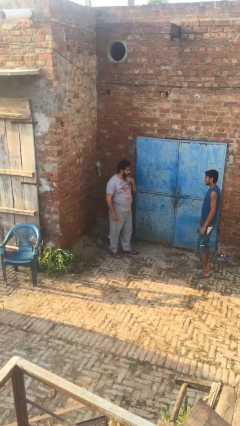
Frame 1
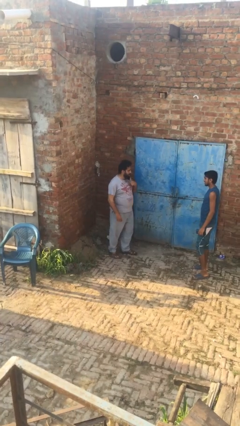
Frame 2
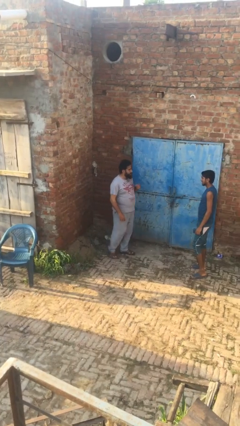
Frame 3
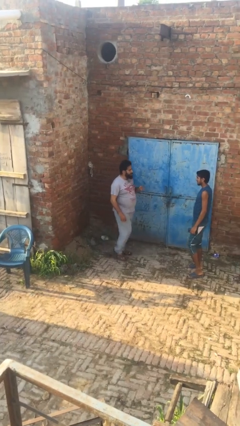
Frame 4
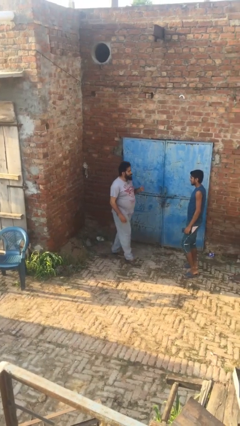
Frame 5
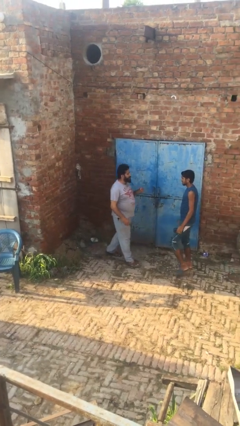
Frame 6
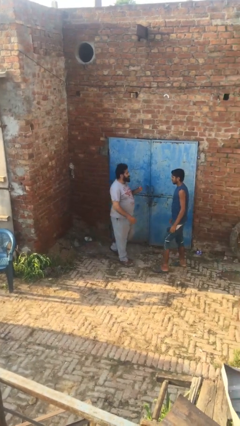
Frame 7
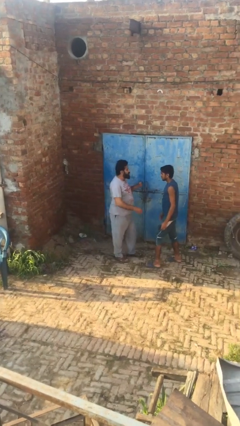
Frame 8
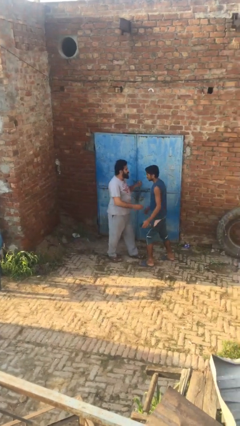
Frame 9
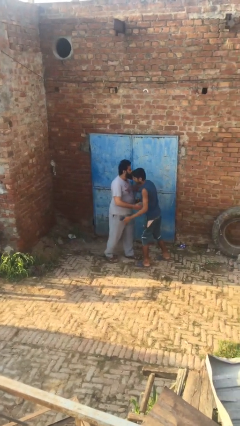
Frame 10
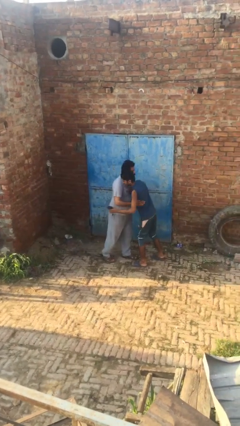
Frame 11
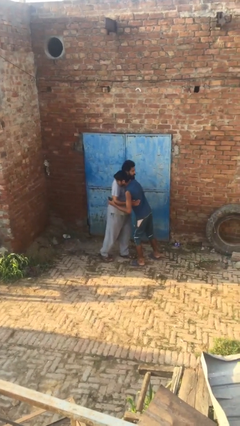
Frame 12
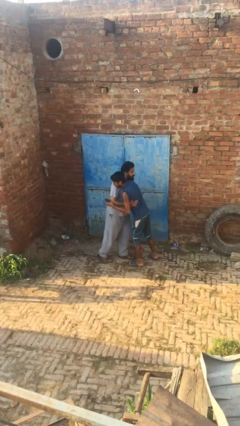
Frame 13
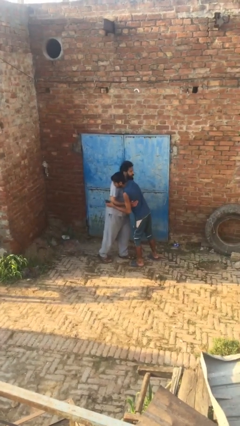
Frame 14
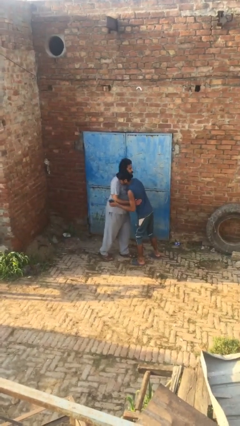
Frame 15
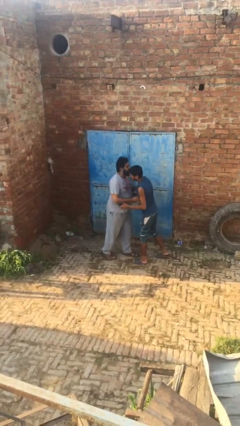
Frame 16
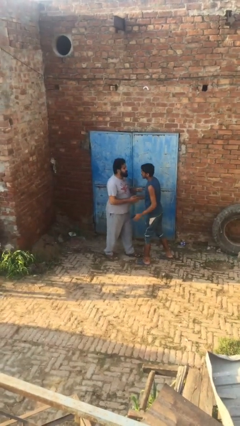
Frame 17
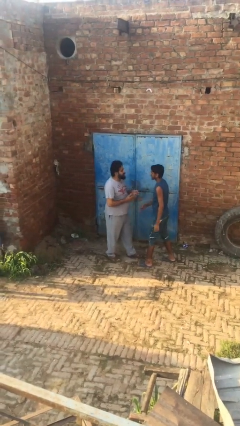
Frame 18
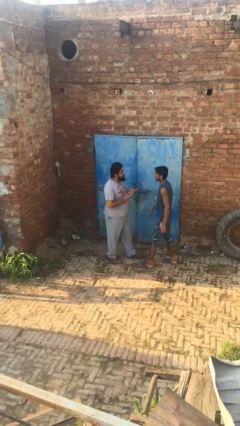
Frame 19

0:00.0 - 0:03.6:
person embraces person

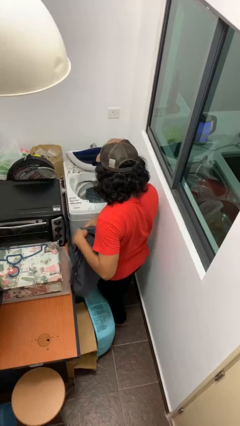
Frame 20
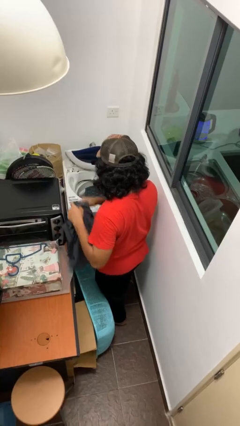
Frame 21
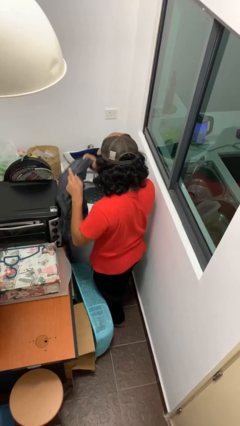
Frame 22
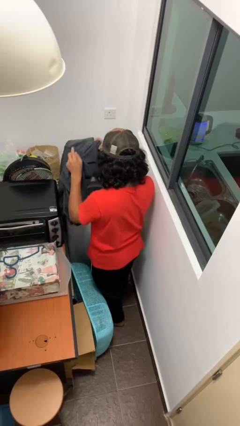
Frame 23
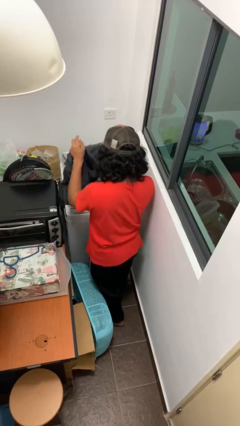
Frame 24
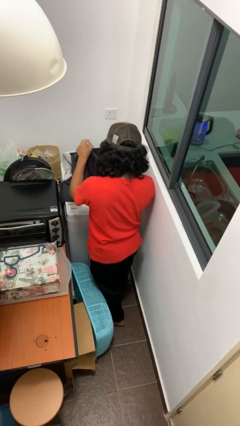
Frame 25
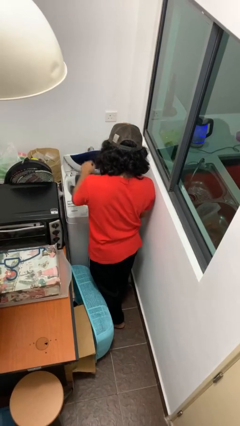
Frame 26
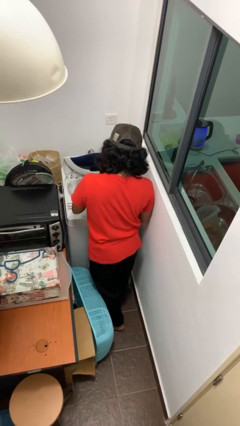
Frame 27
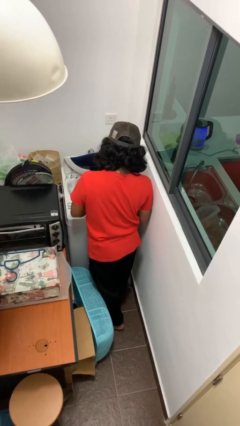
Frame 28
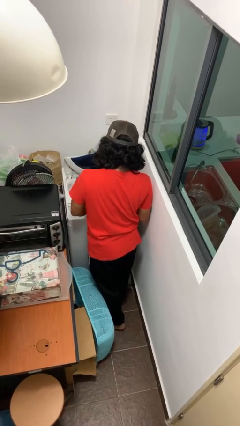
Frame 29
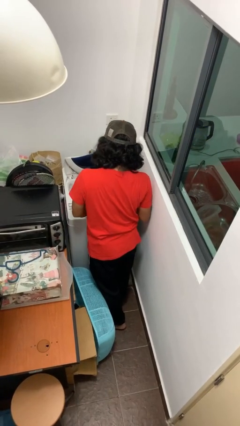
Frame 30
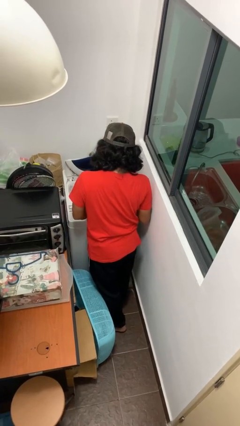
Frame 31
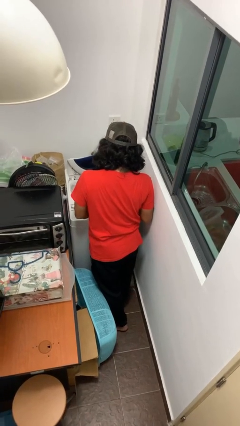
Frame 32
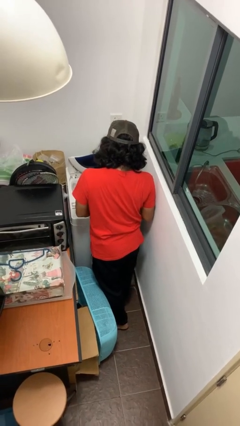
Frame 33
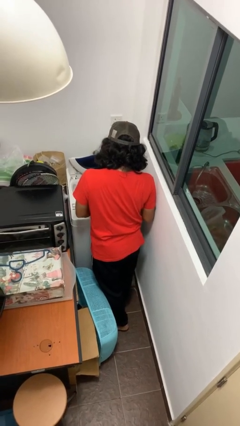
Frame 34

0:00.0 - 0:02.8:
person loads clotheswasher

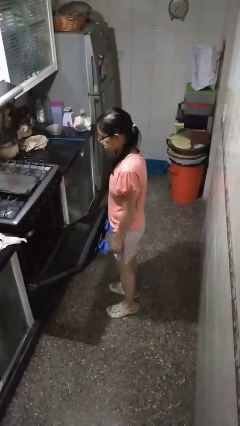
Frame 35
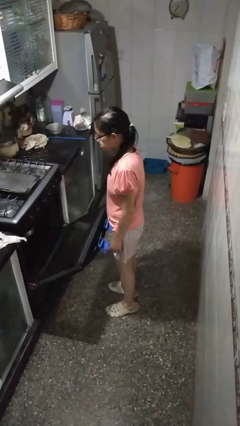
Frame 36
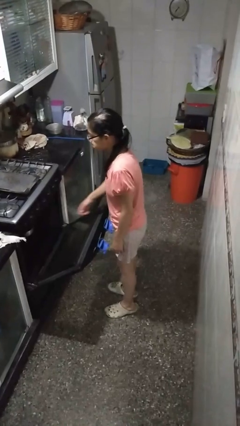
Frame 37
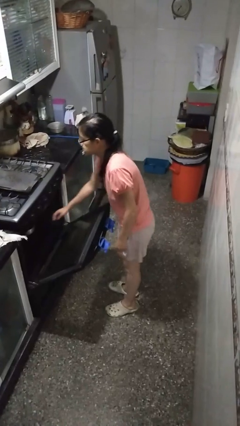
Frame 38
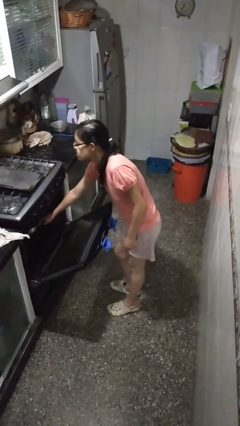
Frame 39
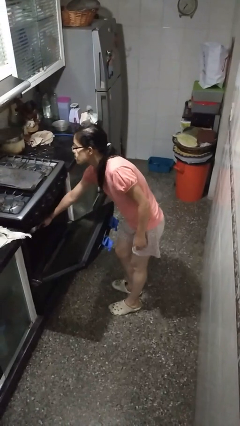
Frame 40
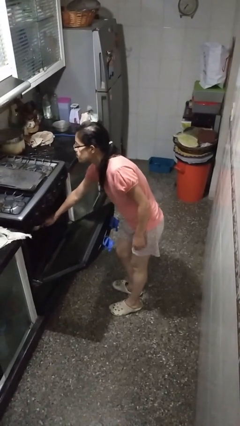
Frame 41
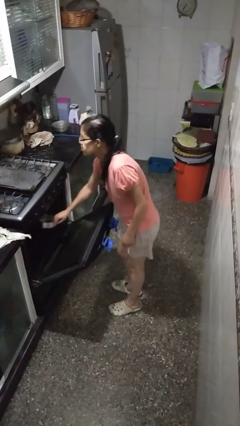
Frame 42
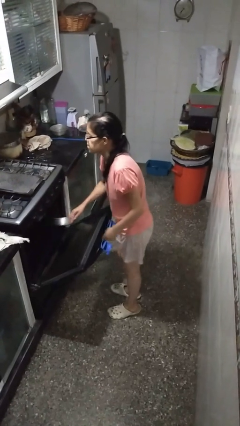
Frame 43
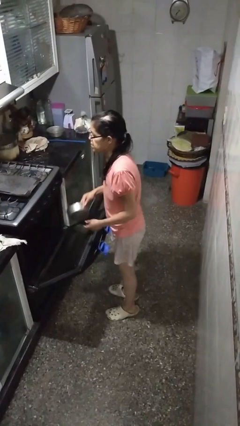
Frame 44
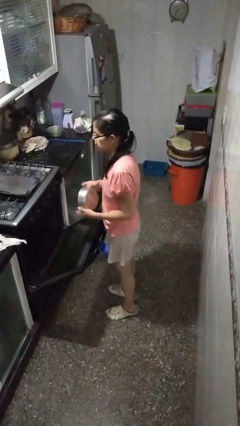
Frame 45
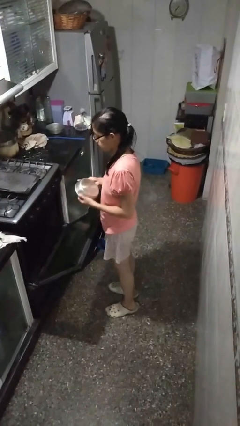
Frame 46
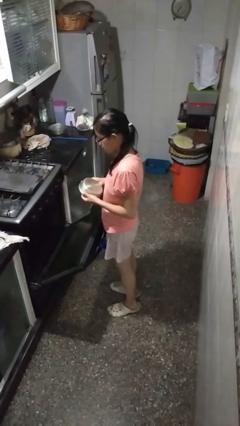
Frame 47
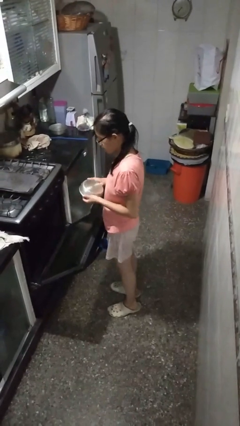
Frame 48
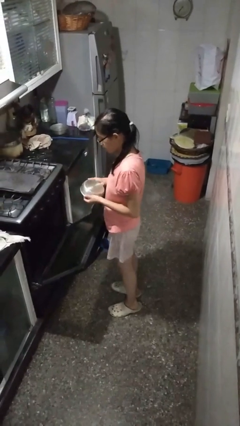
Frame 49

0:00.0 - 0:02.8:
person takes object from oven

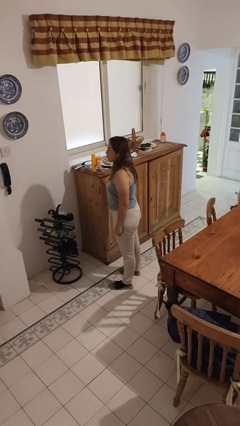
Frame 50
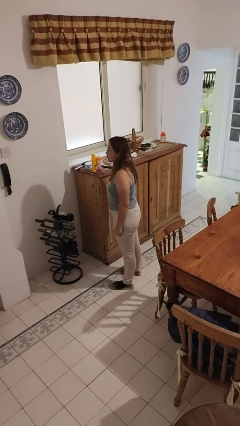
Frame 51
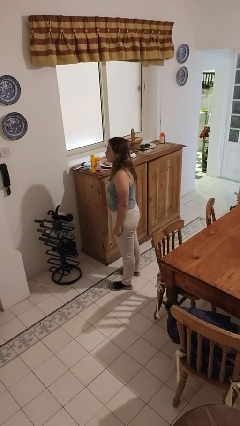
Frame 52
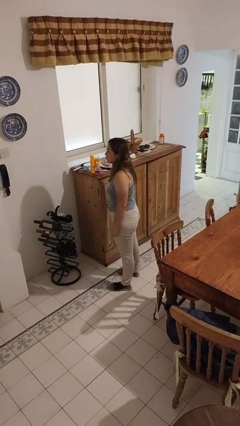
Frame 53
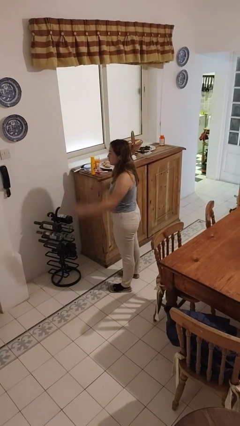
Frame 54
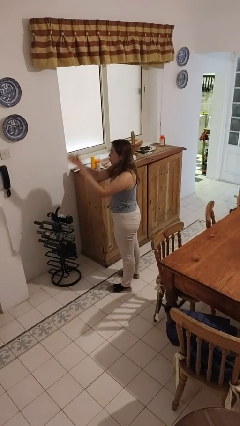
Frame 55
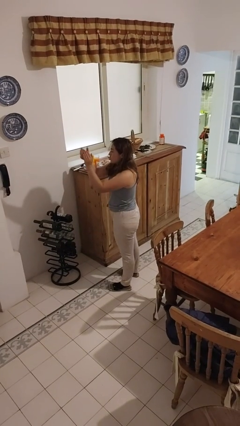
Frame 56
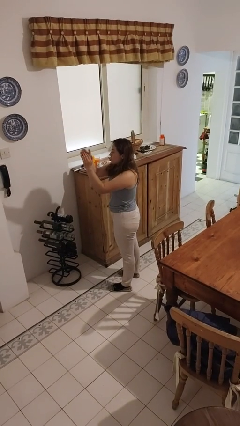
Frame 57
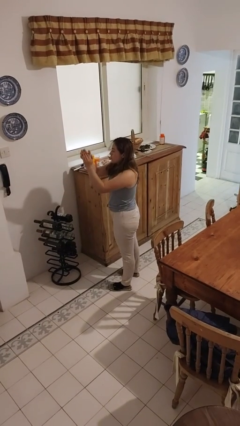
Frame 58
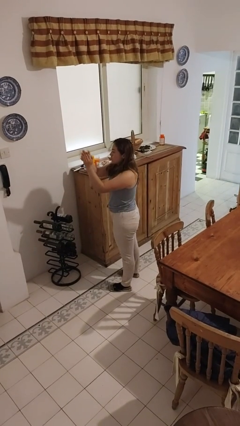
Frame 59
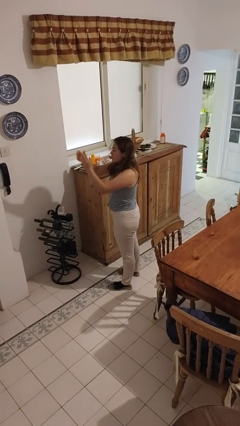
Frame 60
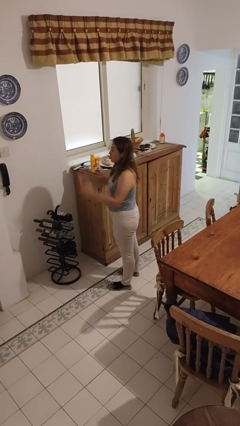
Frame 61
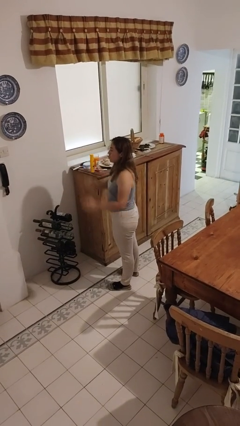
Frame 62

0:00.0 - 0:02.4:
person claps hands

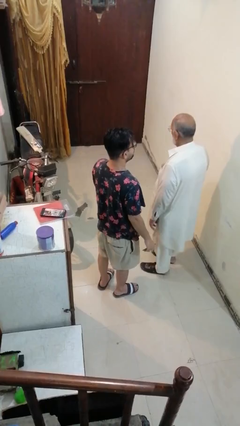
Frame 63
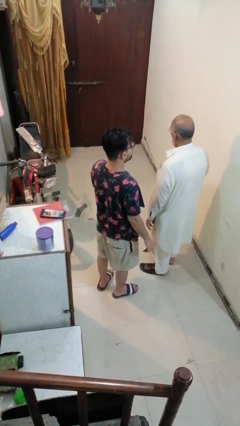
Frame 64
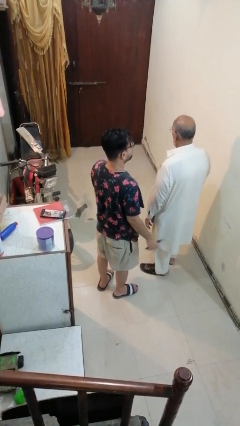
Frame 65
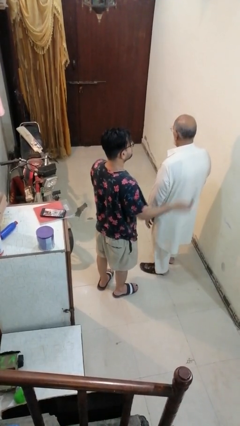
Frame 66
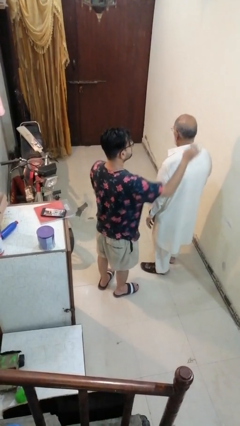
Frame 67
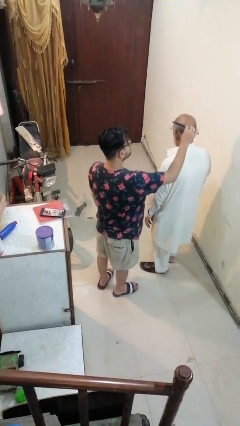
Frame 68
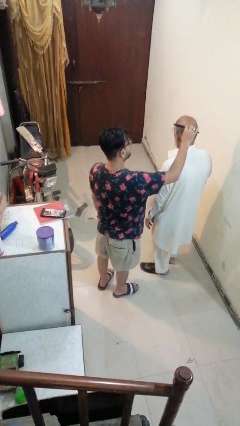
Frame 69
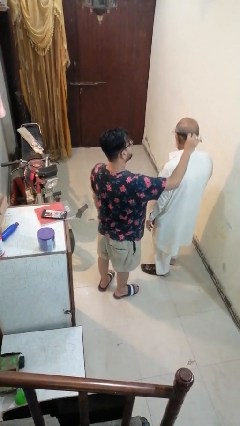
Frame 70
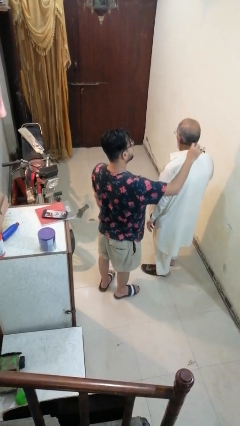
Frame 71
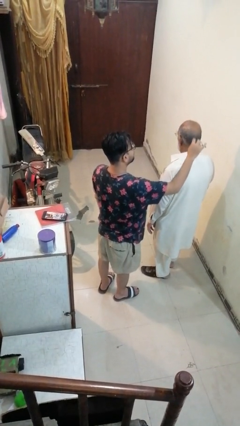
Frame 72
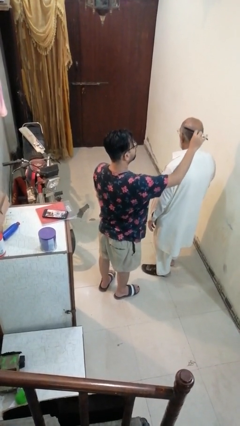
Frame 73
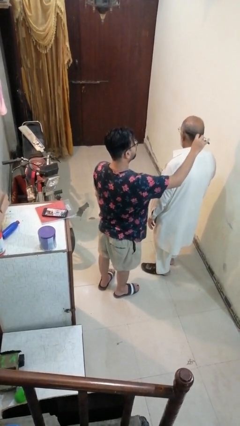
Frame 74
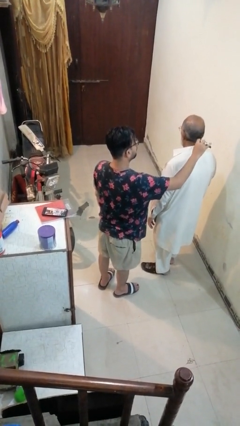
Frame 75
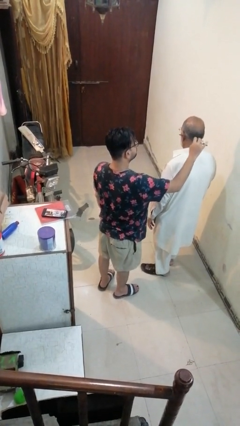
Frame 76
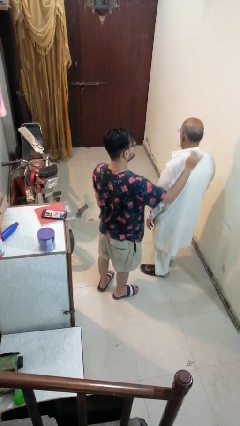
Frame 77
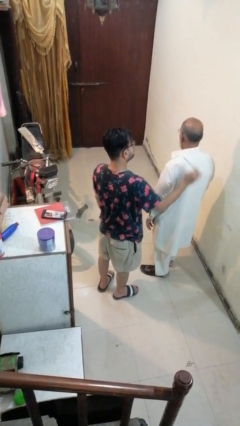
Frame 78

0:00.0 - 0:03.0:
person brushes hair of person

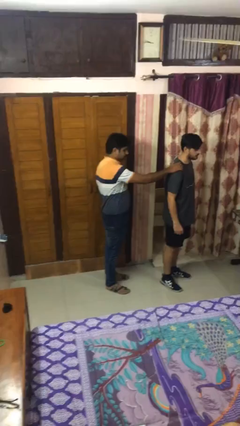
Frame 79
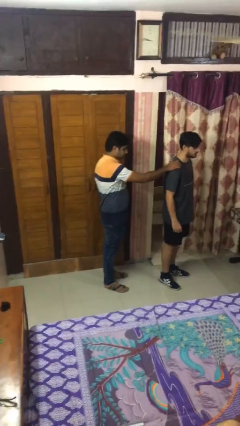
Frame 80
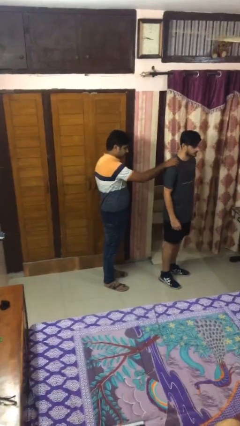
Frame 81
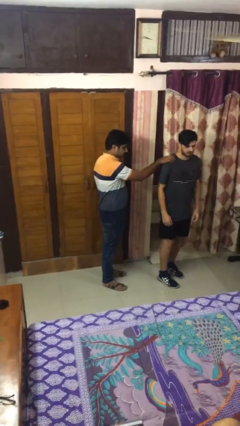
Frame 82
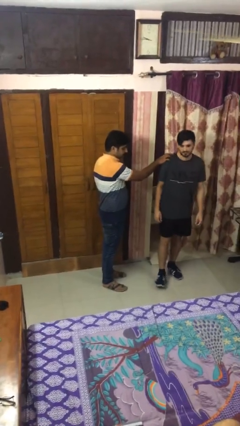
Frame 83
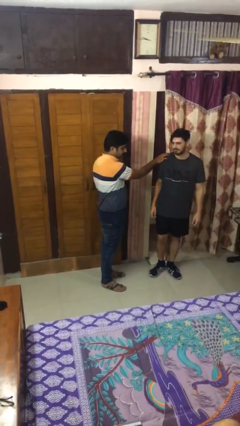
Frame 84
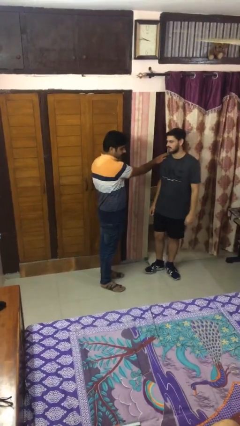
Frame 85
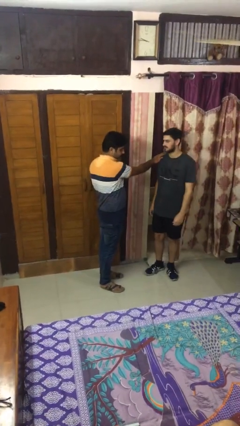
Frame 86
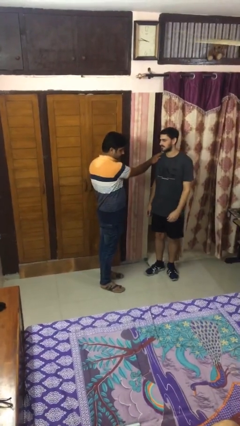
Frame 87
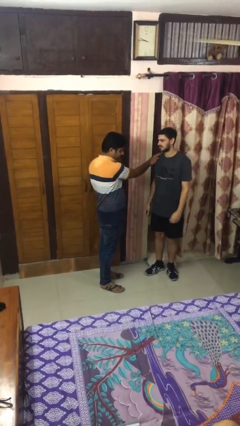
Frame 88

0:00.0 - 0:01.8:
person spins person around

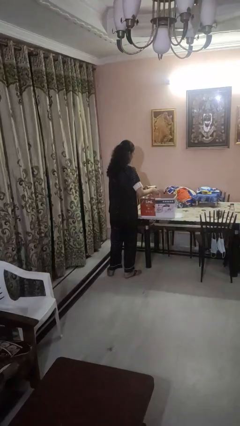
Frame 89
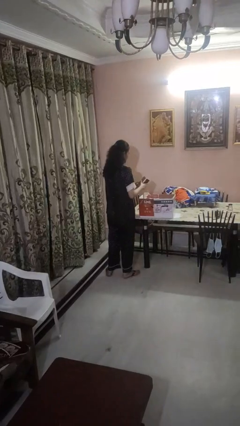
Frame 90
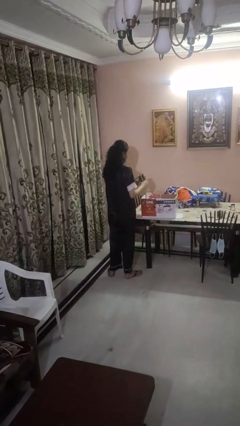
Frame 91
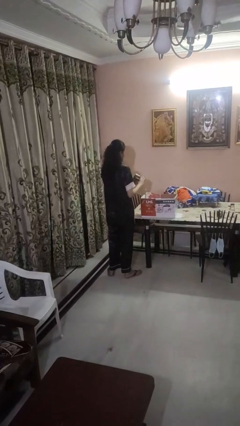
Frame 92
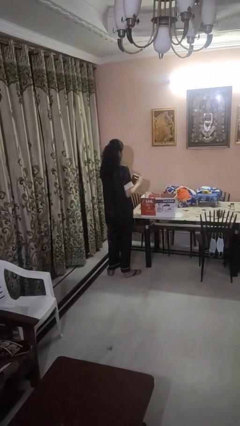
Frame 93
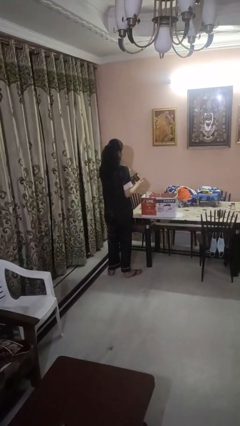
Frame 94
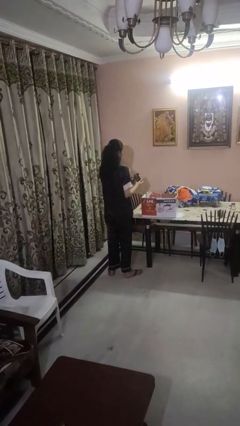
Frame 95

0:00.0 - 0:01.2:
person takes object from box
